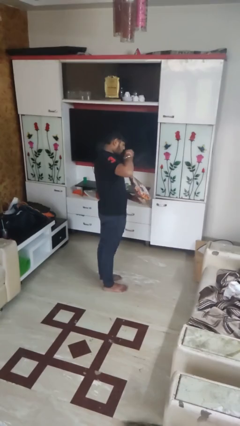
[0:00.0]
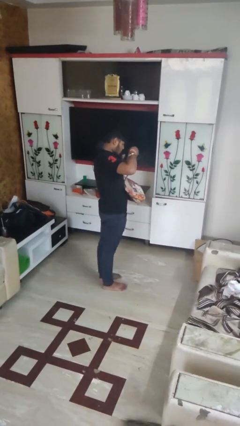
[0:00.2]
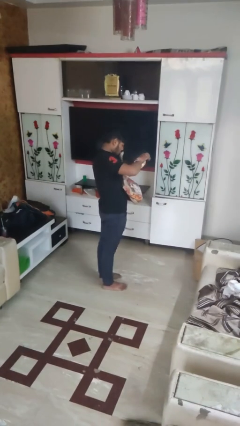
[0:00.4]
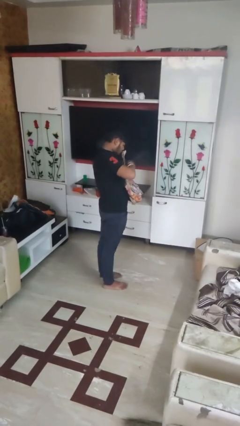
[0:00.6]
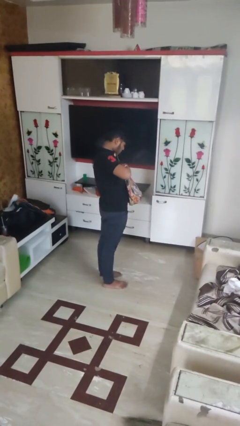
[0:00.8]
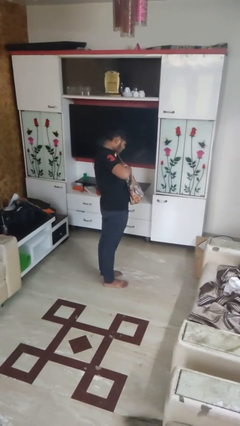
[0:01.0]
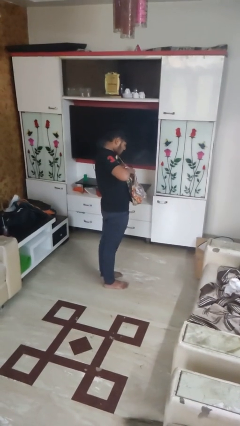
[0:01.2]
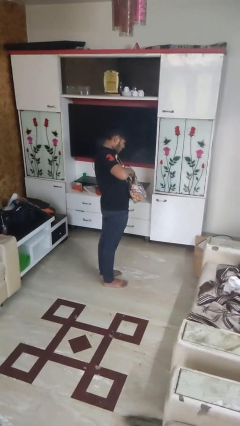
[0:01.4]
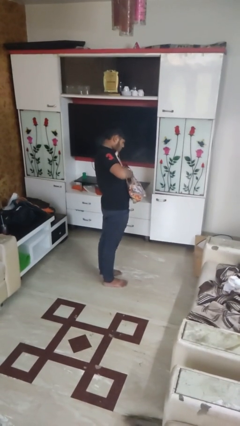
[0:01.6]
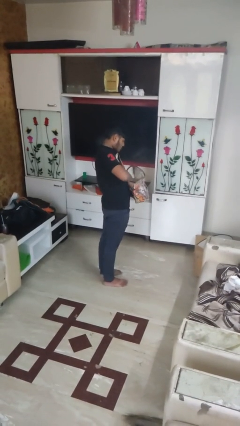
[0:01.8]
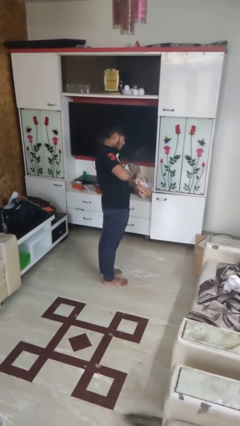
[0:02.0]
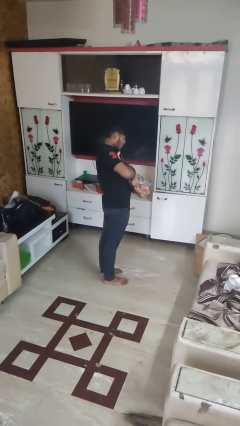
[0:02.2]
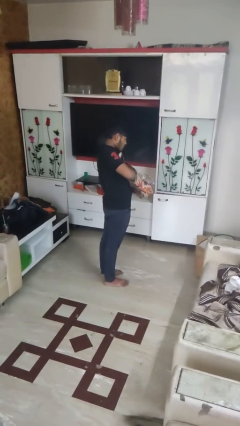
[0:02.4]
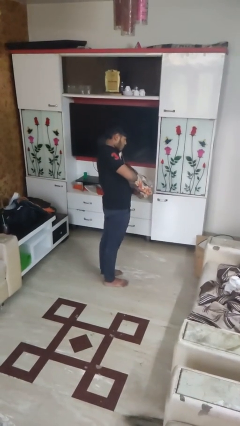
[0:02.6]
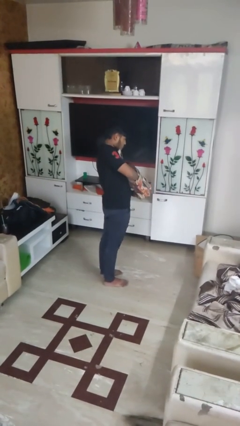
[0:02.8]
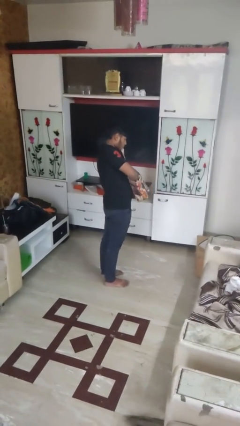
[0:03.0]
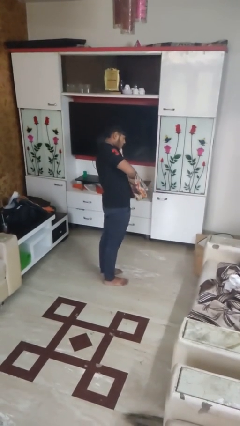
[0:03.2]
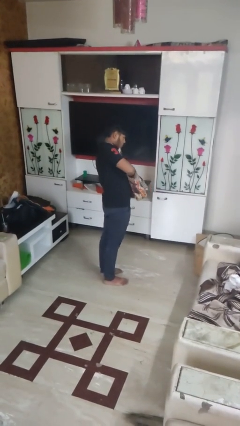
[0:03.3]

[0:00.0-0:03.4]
person searches in purse

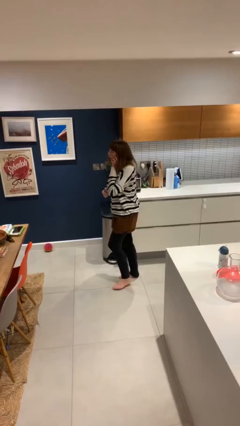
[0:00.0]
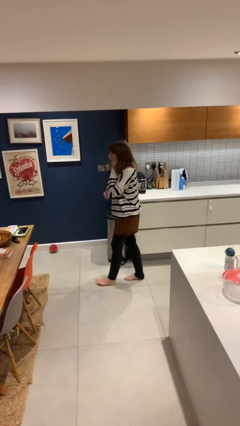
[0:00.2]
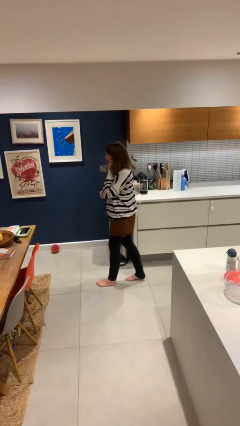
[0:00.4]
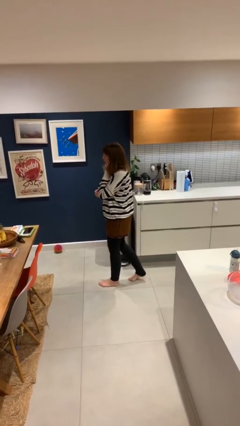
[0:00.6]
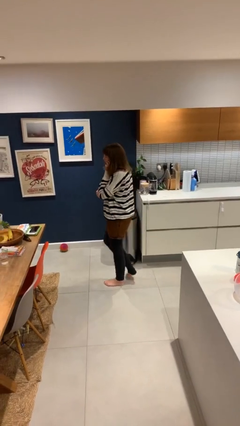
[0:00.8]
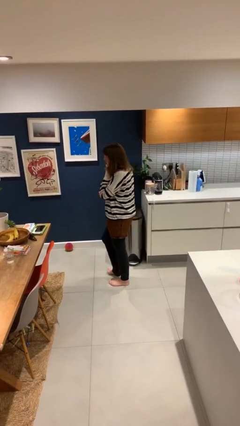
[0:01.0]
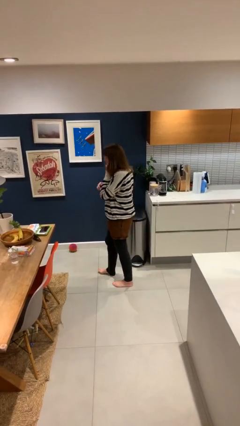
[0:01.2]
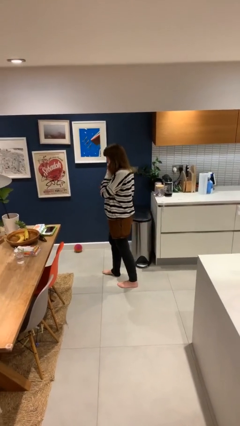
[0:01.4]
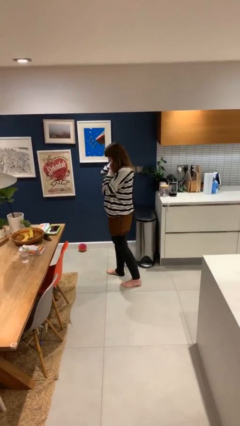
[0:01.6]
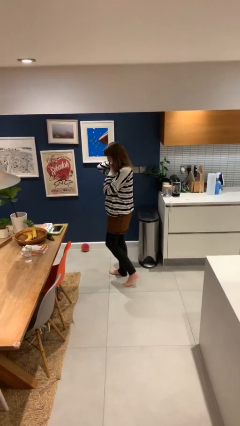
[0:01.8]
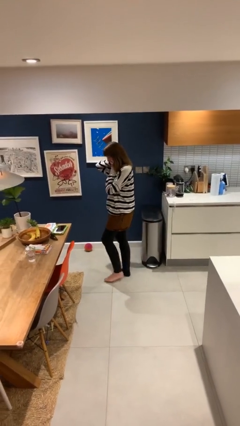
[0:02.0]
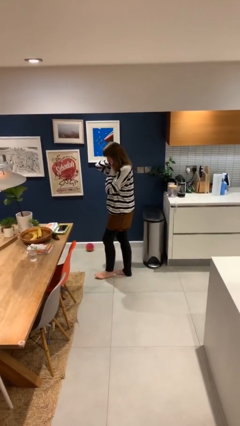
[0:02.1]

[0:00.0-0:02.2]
person talks on phone

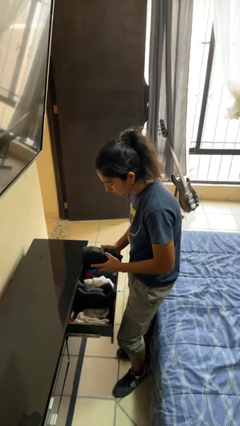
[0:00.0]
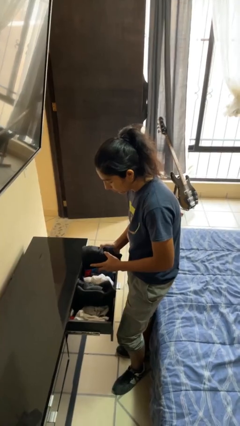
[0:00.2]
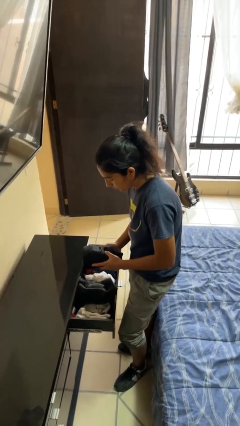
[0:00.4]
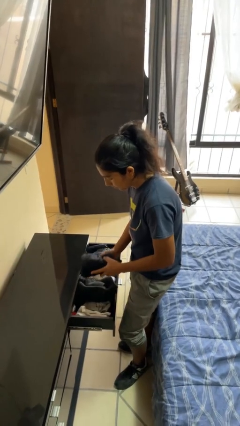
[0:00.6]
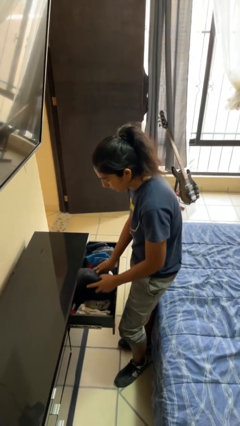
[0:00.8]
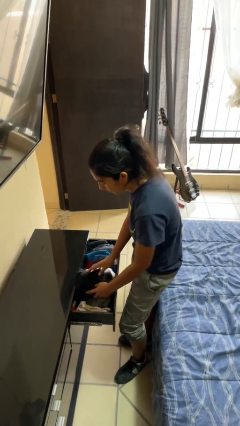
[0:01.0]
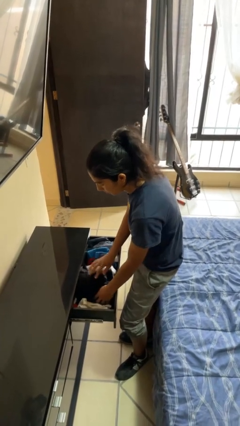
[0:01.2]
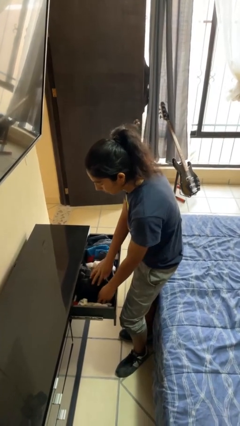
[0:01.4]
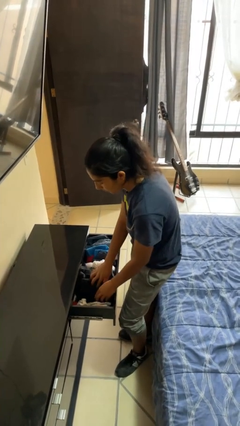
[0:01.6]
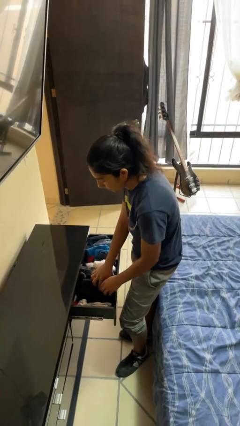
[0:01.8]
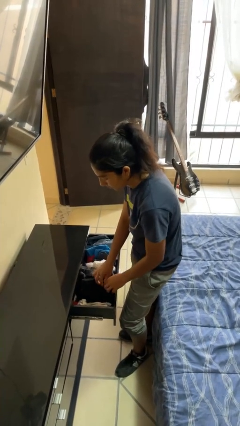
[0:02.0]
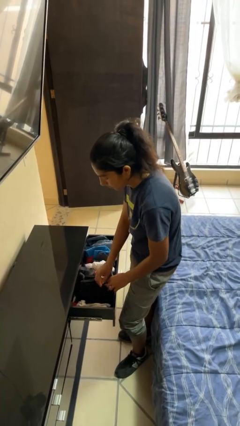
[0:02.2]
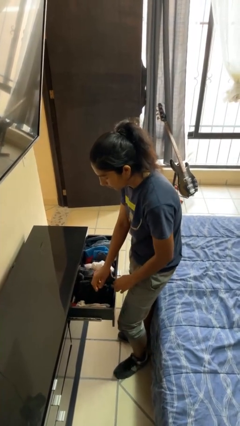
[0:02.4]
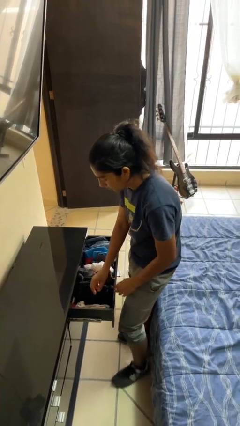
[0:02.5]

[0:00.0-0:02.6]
person puts clothes into dresser

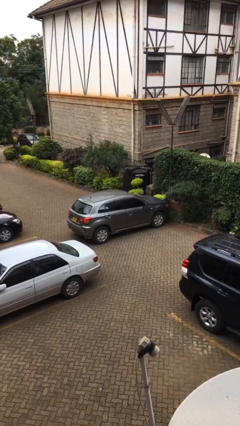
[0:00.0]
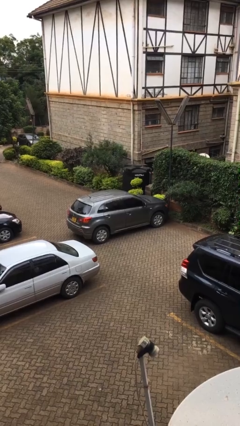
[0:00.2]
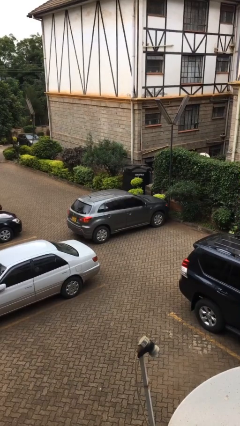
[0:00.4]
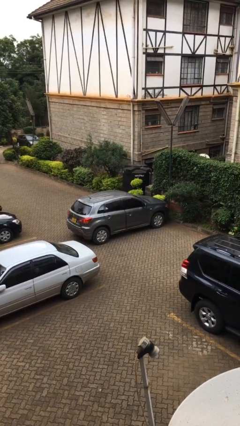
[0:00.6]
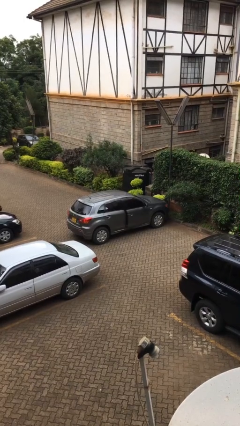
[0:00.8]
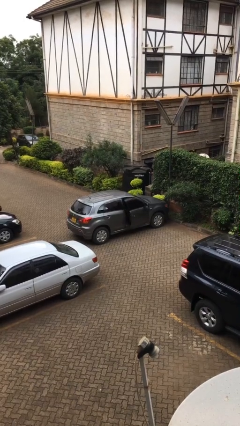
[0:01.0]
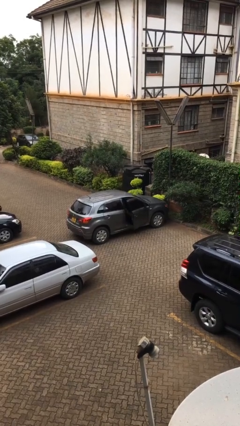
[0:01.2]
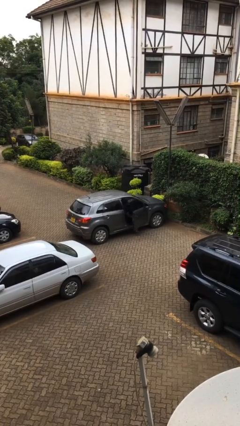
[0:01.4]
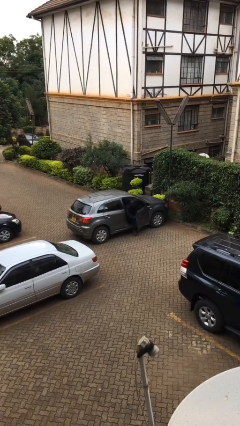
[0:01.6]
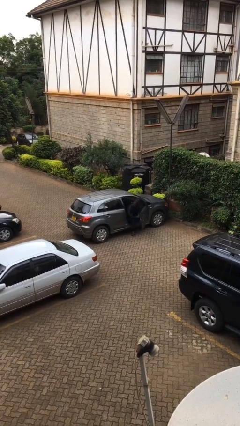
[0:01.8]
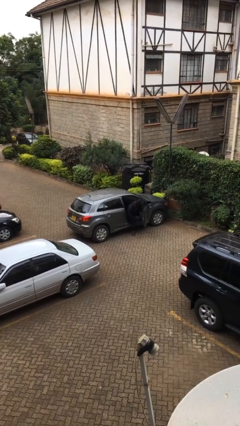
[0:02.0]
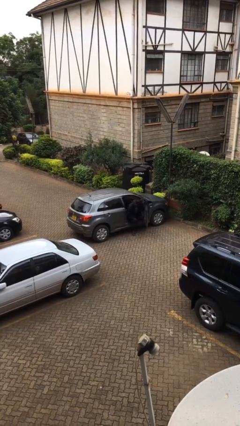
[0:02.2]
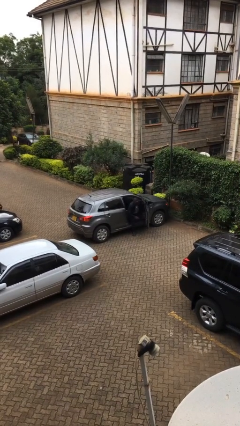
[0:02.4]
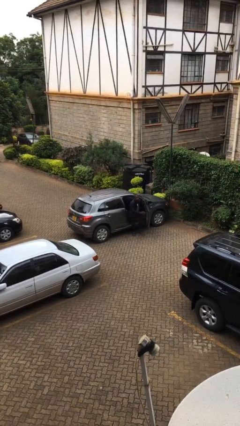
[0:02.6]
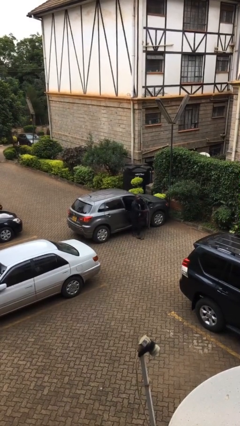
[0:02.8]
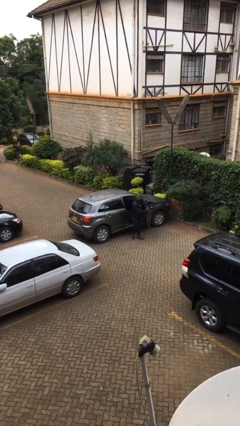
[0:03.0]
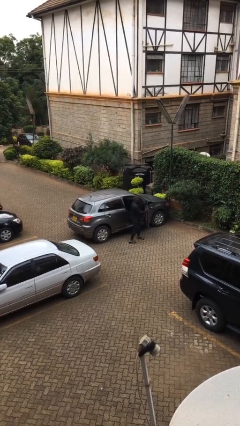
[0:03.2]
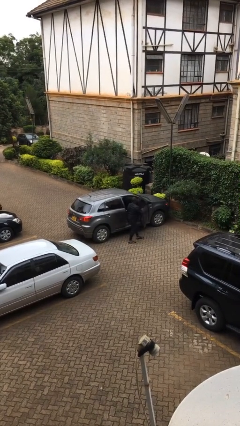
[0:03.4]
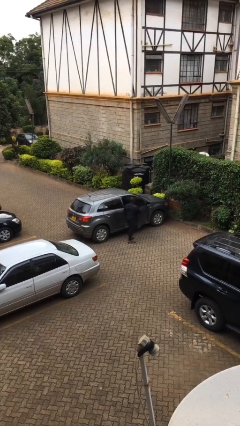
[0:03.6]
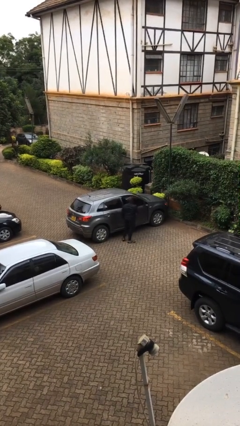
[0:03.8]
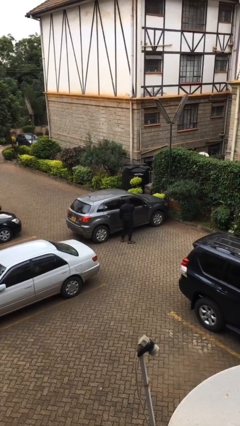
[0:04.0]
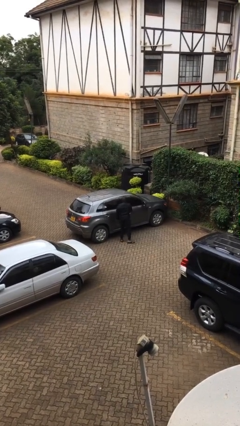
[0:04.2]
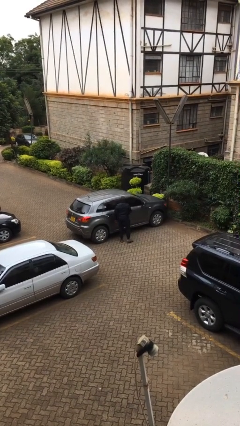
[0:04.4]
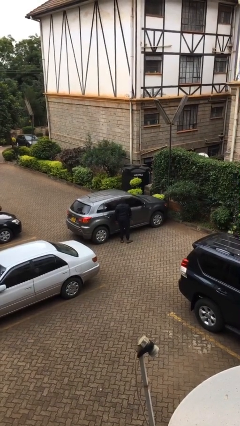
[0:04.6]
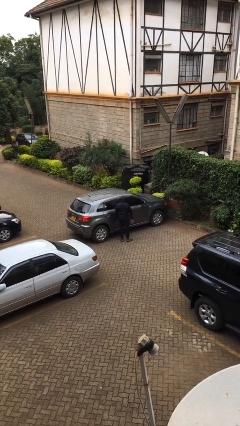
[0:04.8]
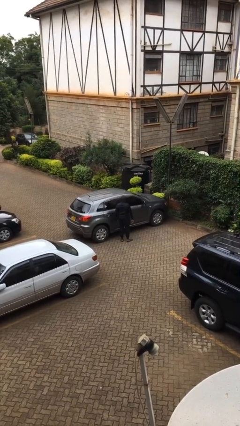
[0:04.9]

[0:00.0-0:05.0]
car drops off person

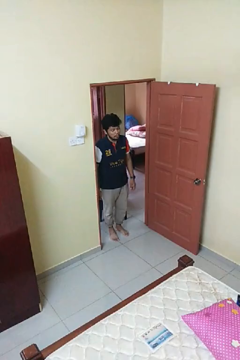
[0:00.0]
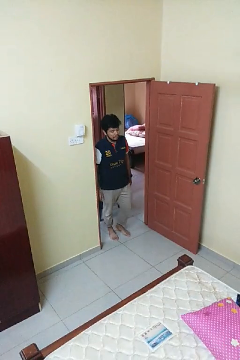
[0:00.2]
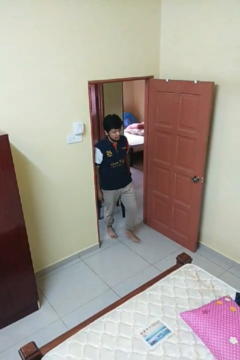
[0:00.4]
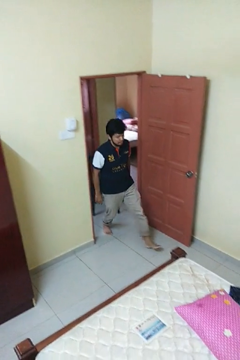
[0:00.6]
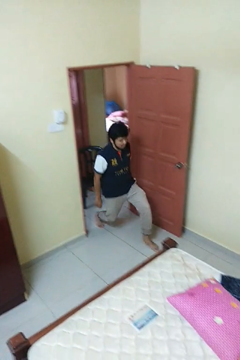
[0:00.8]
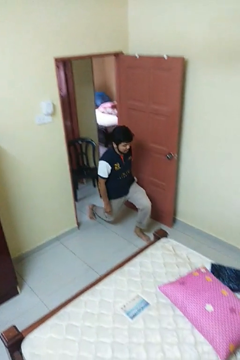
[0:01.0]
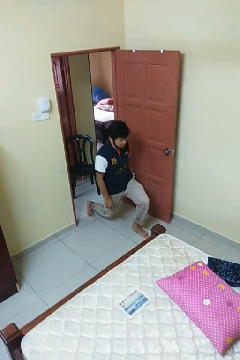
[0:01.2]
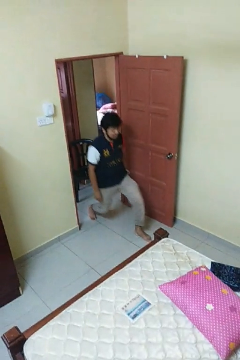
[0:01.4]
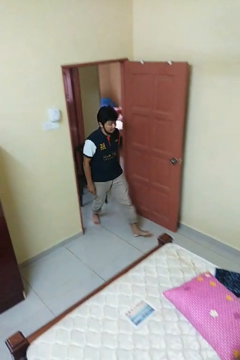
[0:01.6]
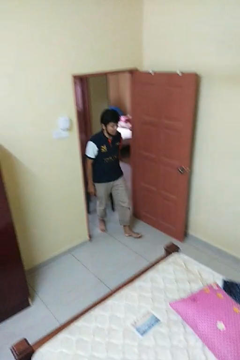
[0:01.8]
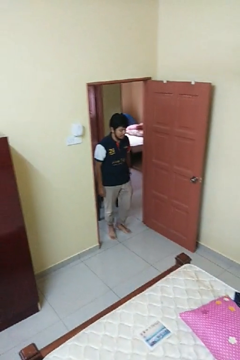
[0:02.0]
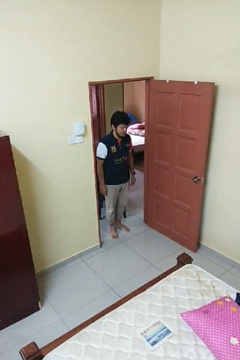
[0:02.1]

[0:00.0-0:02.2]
person exercises with lunges

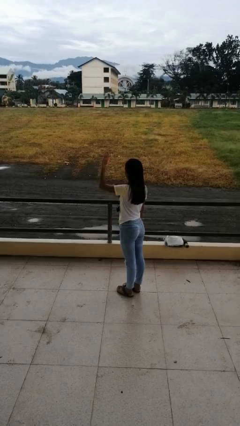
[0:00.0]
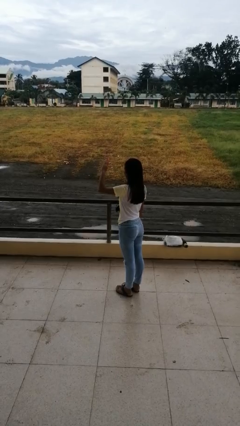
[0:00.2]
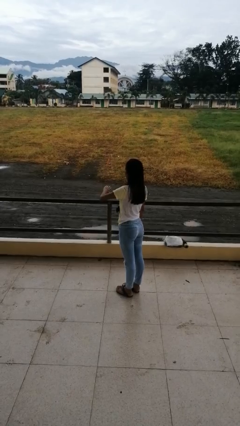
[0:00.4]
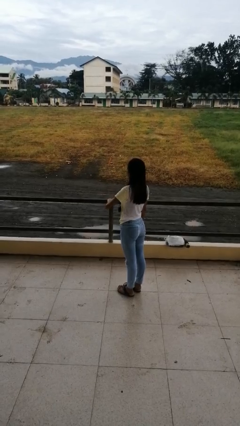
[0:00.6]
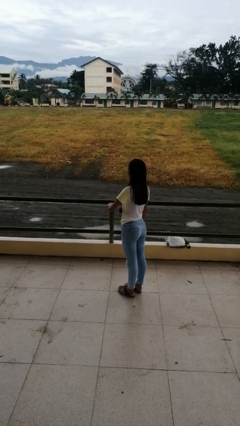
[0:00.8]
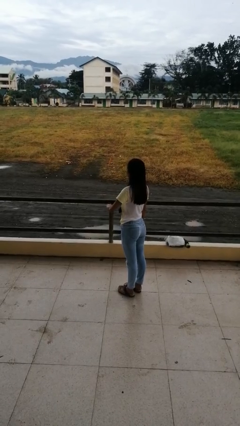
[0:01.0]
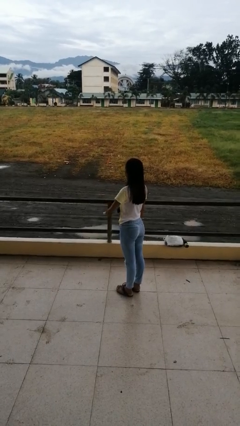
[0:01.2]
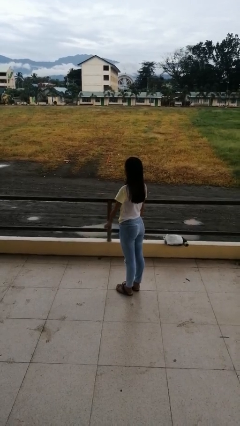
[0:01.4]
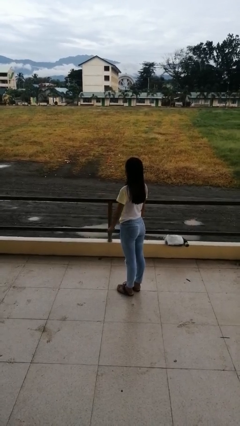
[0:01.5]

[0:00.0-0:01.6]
person gestures swipe down

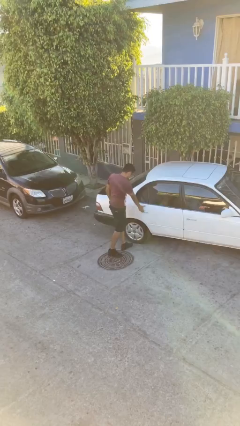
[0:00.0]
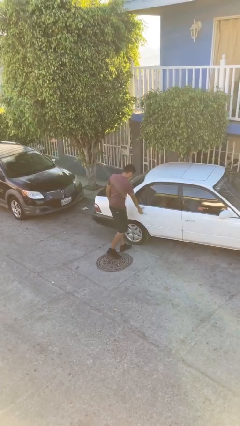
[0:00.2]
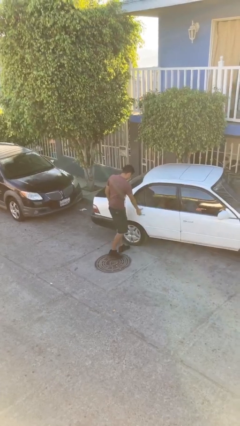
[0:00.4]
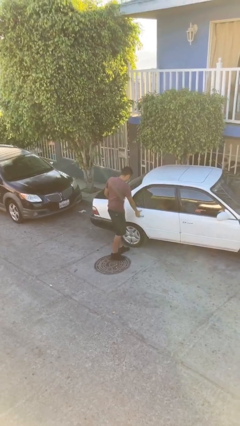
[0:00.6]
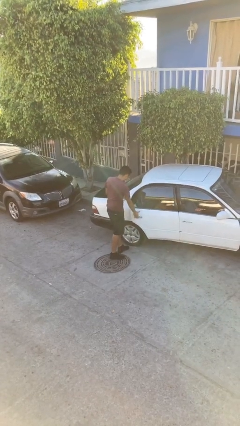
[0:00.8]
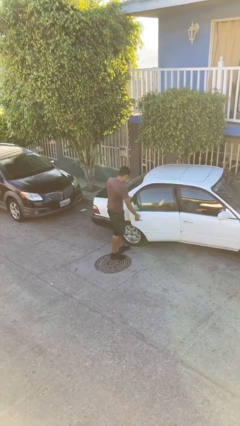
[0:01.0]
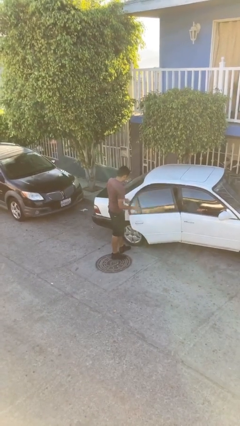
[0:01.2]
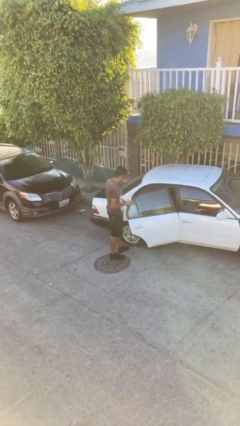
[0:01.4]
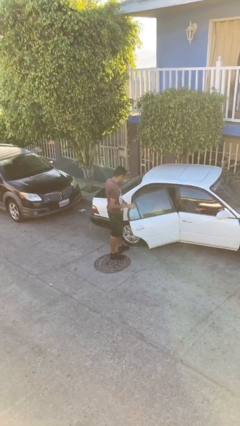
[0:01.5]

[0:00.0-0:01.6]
person opens car door
